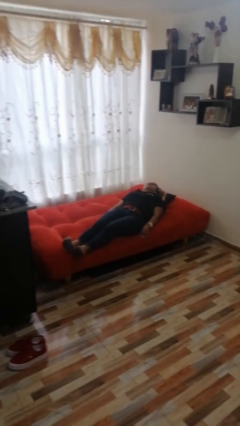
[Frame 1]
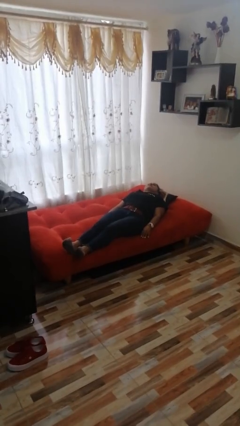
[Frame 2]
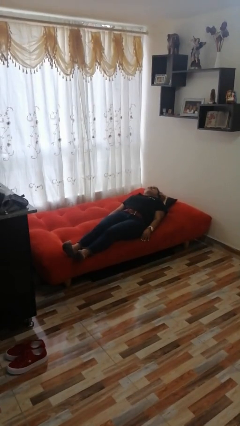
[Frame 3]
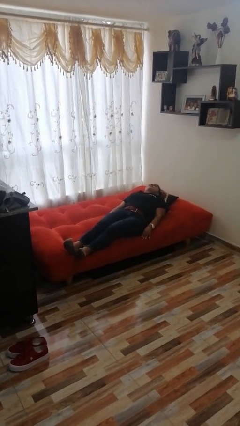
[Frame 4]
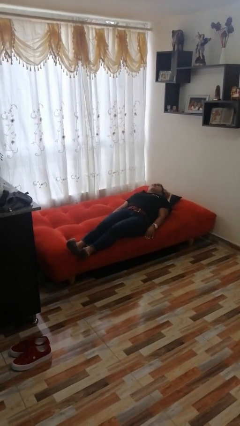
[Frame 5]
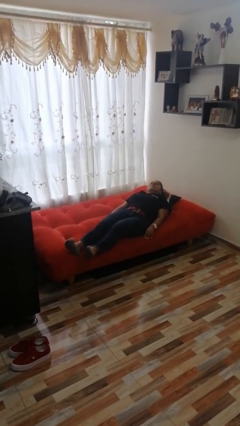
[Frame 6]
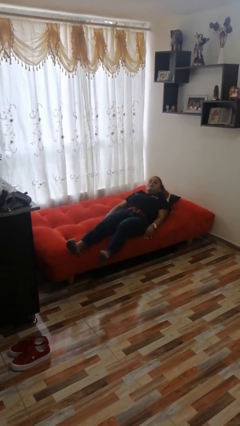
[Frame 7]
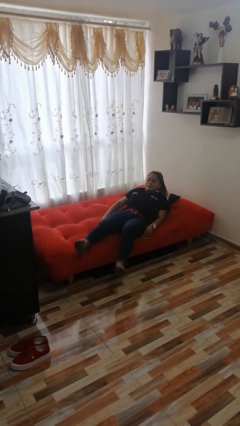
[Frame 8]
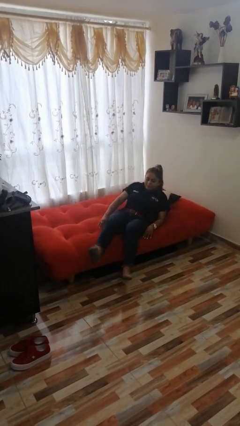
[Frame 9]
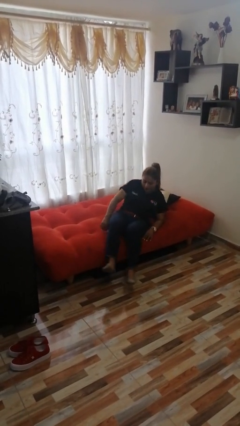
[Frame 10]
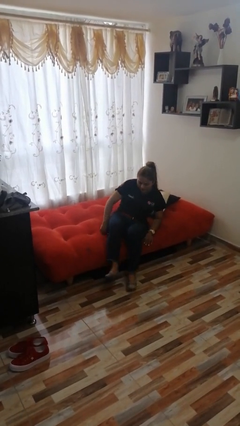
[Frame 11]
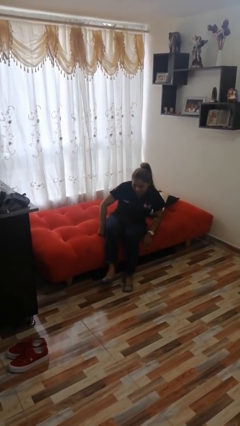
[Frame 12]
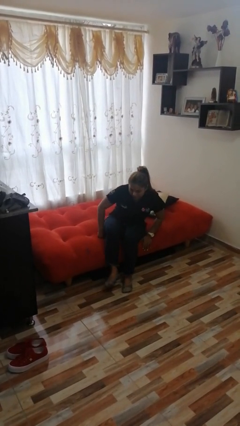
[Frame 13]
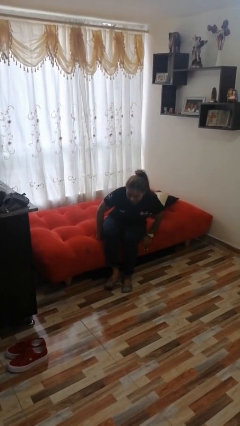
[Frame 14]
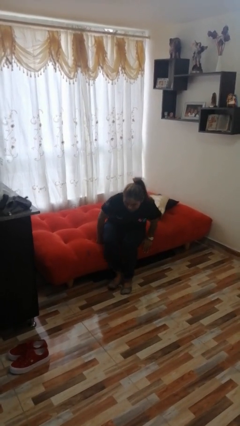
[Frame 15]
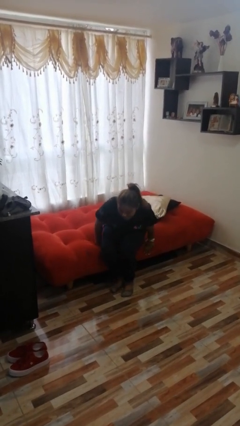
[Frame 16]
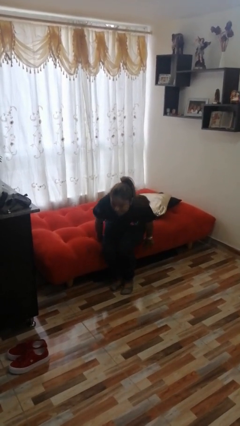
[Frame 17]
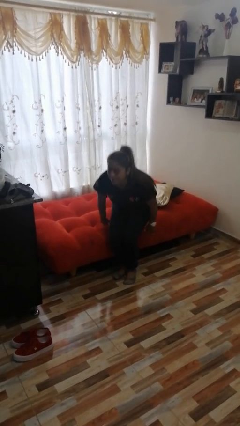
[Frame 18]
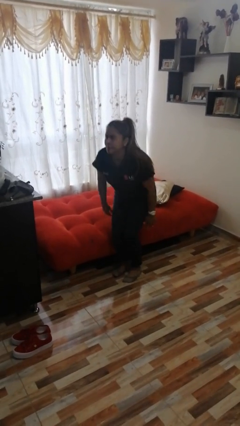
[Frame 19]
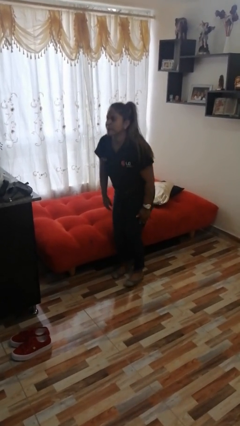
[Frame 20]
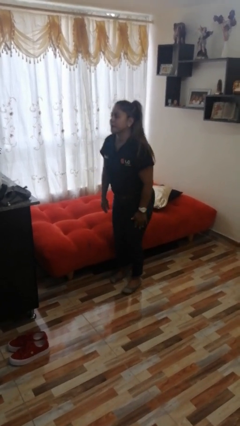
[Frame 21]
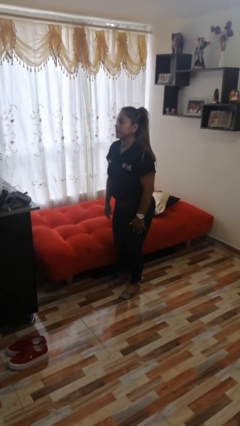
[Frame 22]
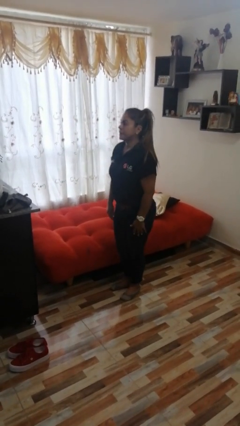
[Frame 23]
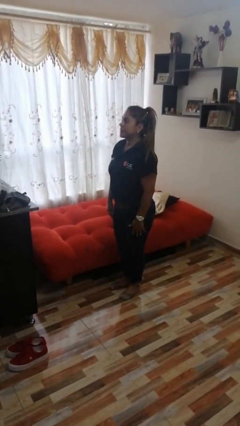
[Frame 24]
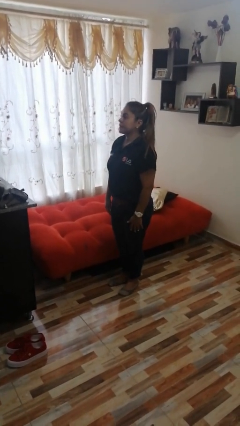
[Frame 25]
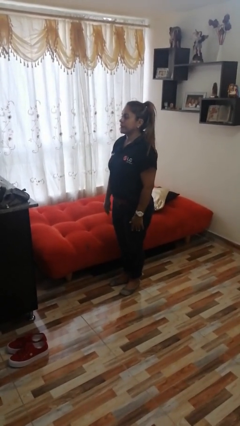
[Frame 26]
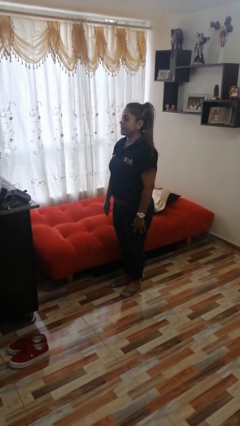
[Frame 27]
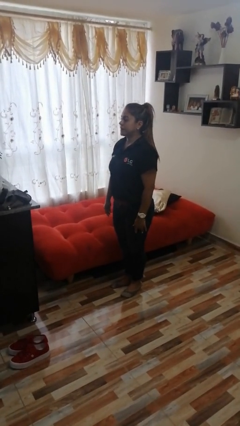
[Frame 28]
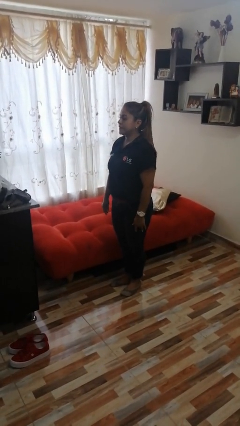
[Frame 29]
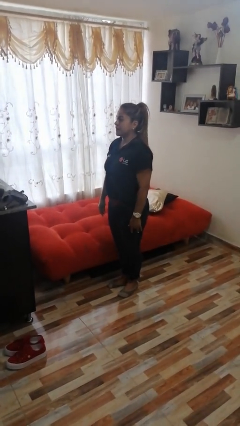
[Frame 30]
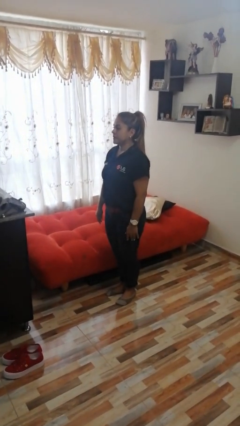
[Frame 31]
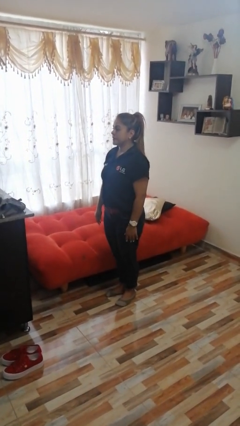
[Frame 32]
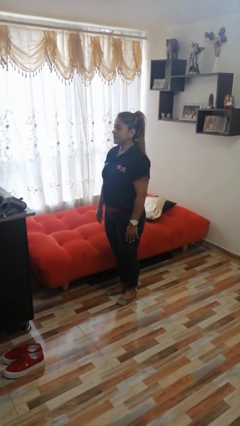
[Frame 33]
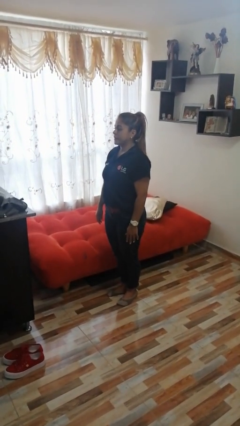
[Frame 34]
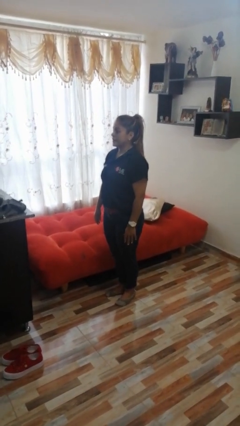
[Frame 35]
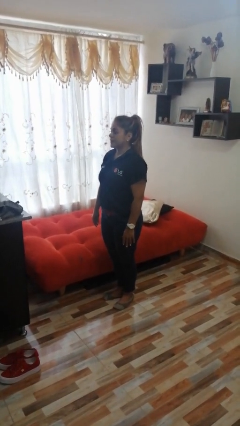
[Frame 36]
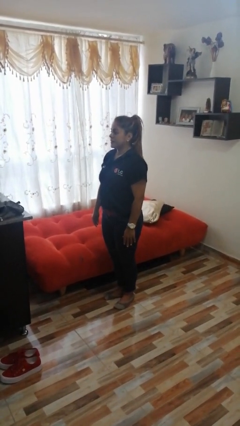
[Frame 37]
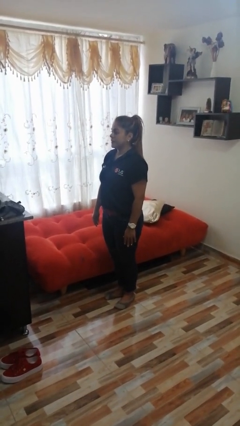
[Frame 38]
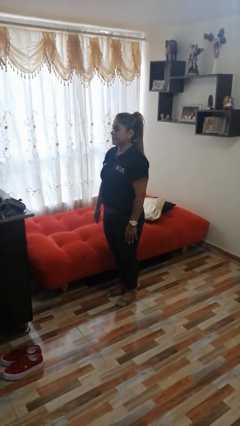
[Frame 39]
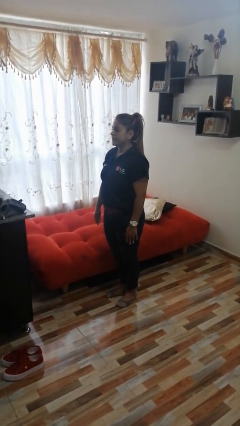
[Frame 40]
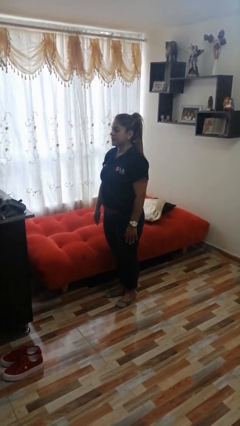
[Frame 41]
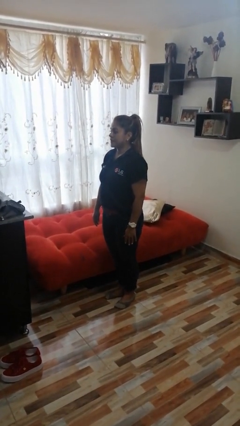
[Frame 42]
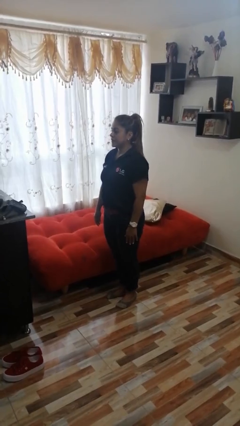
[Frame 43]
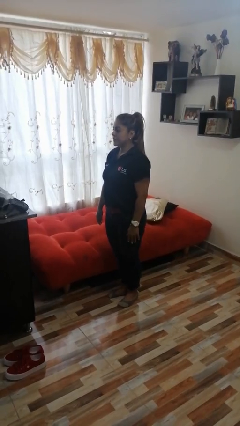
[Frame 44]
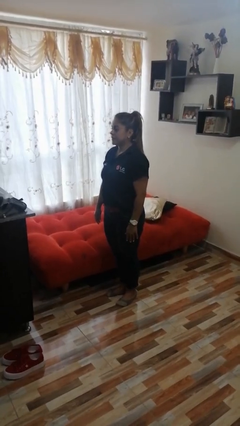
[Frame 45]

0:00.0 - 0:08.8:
person stands up

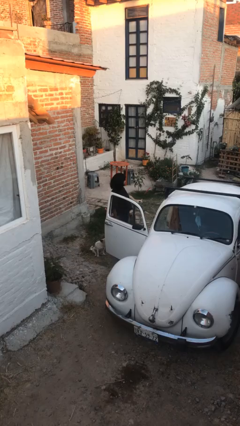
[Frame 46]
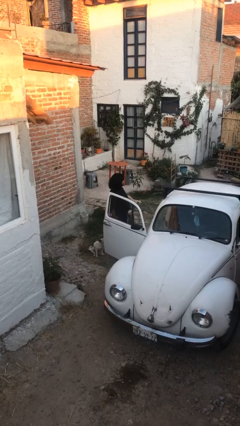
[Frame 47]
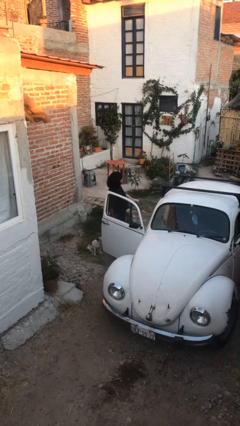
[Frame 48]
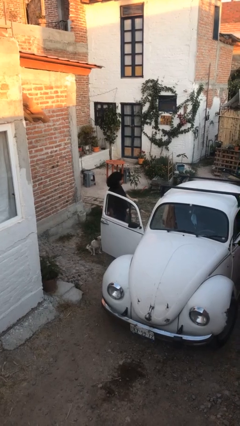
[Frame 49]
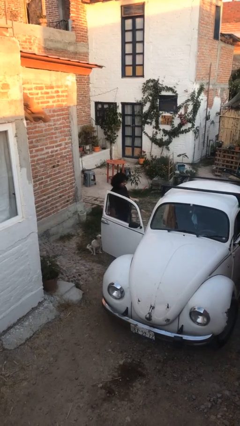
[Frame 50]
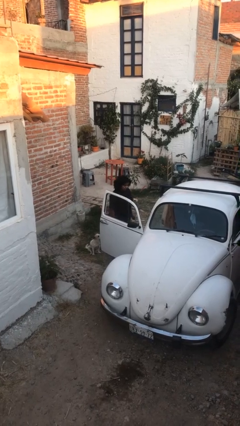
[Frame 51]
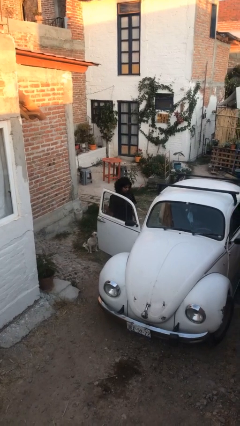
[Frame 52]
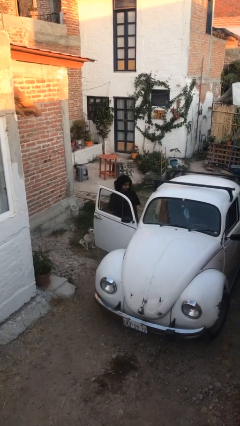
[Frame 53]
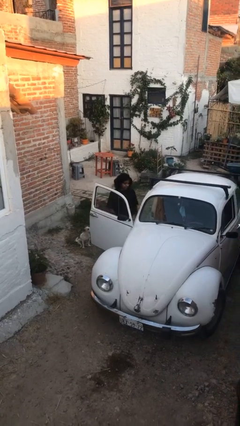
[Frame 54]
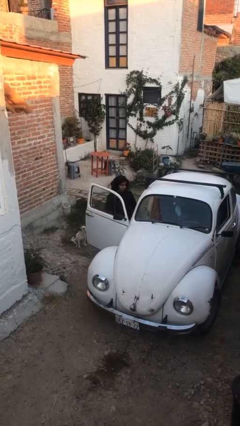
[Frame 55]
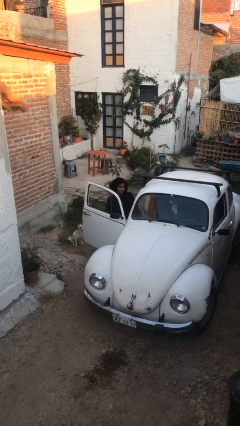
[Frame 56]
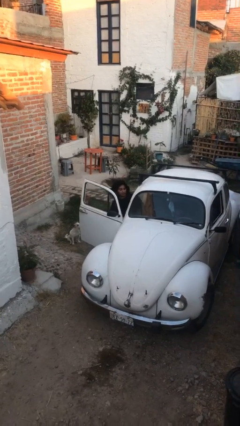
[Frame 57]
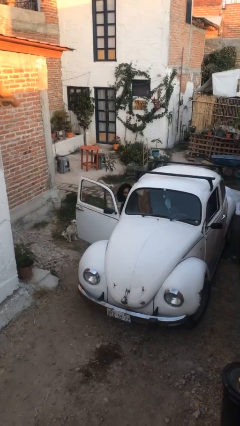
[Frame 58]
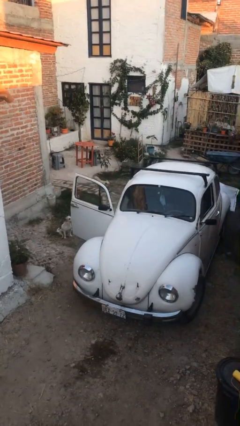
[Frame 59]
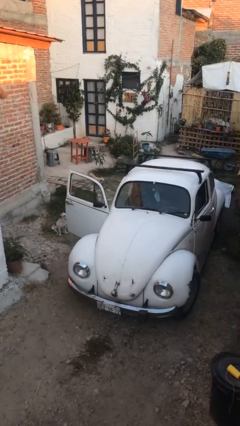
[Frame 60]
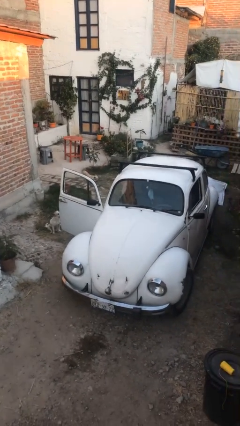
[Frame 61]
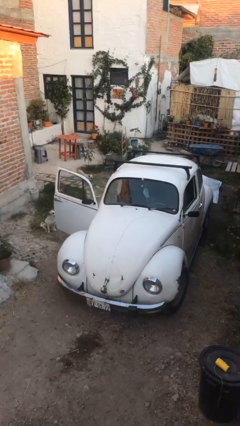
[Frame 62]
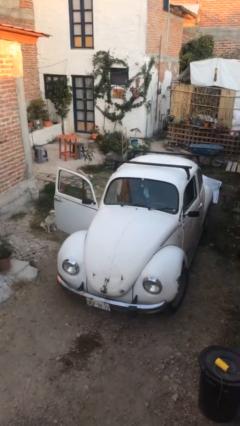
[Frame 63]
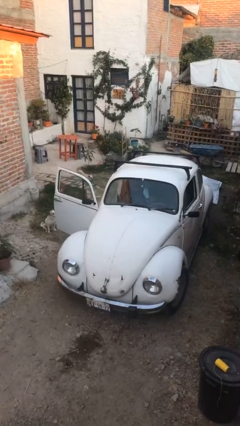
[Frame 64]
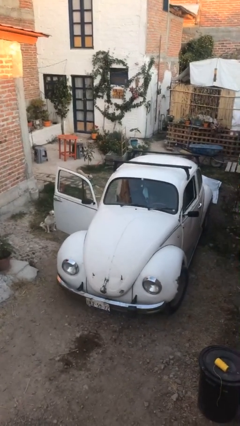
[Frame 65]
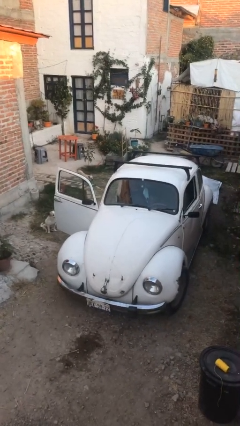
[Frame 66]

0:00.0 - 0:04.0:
person enters car

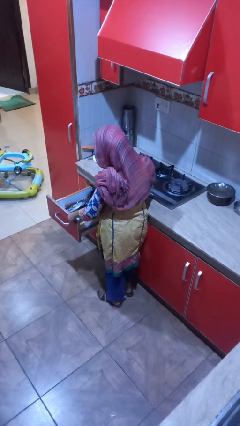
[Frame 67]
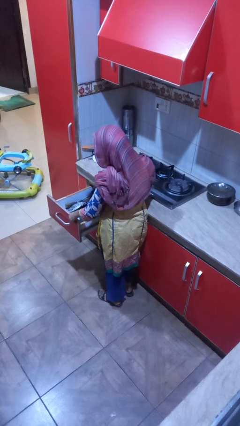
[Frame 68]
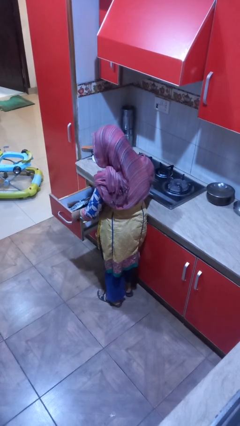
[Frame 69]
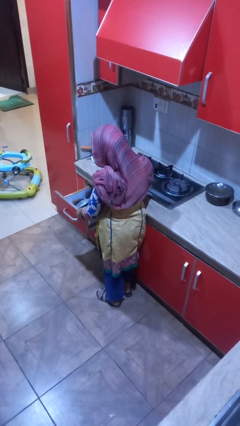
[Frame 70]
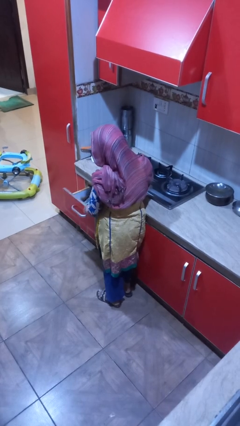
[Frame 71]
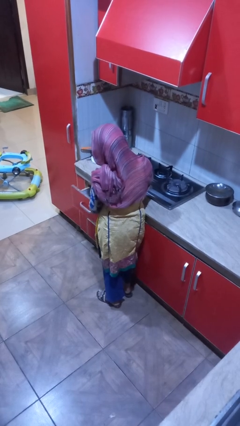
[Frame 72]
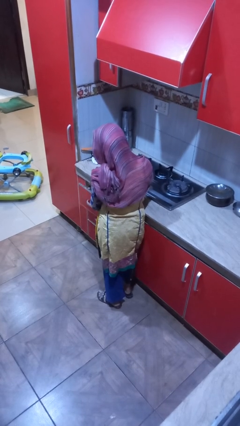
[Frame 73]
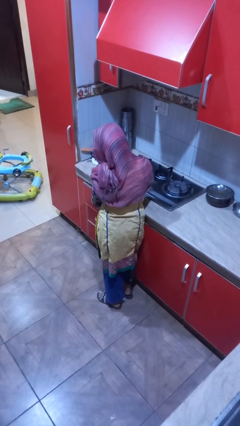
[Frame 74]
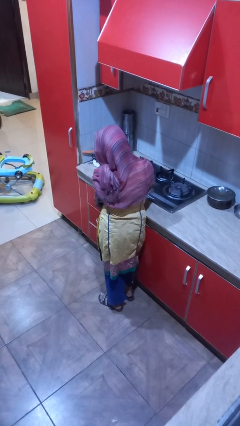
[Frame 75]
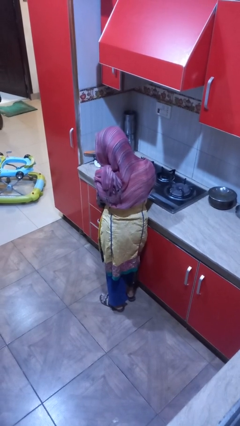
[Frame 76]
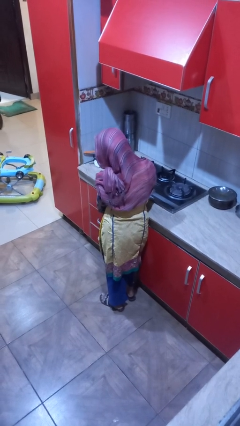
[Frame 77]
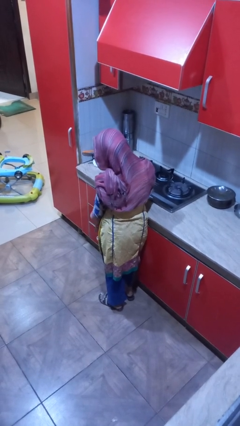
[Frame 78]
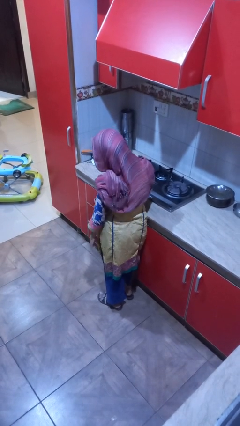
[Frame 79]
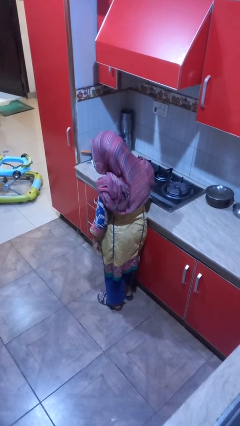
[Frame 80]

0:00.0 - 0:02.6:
person closes kitchen drawer

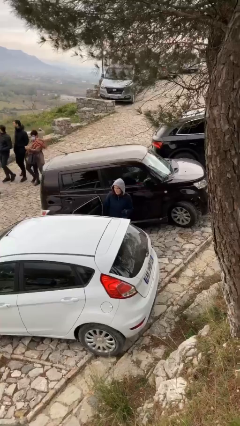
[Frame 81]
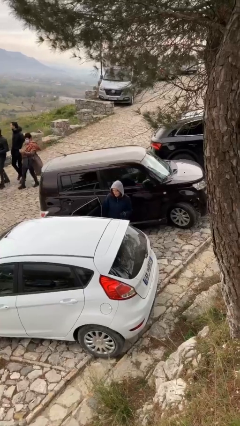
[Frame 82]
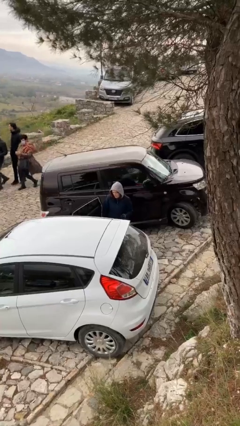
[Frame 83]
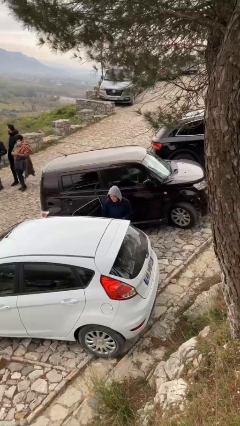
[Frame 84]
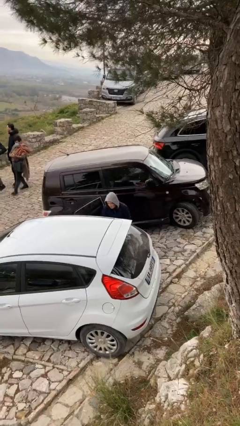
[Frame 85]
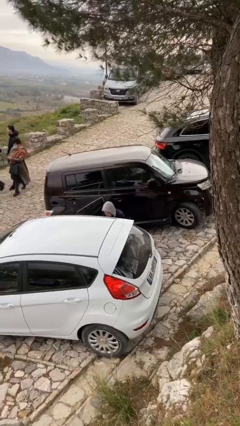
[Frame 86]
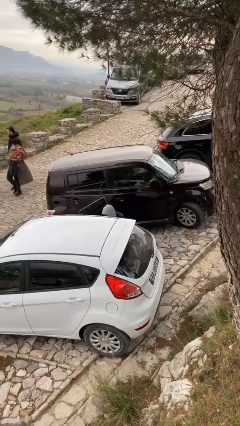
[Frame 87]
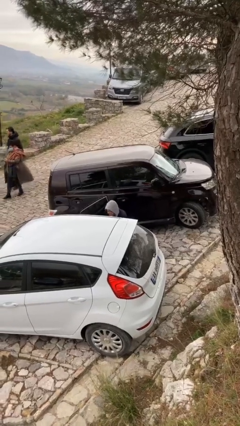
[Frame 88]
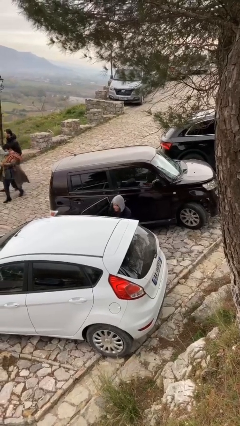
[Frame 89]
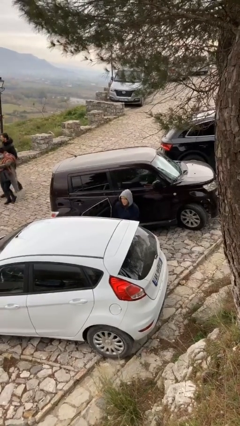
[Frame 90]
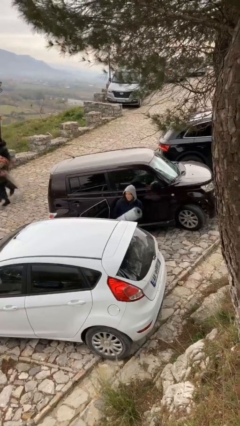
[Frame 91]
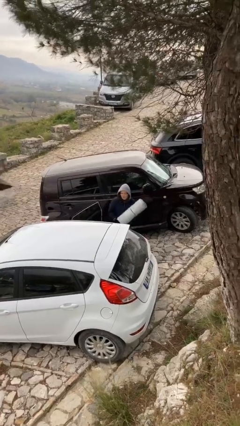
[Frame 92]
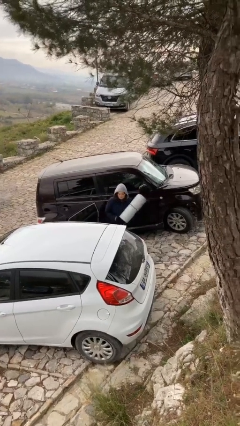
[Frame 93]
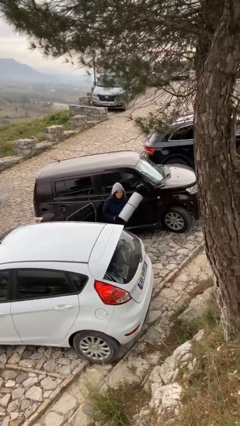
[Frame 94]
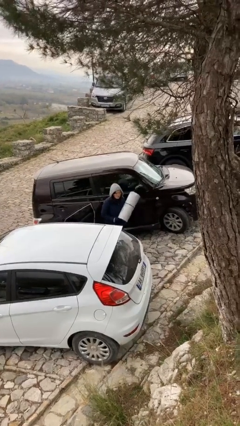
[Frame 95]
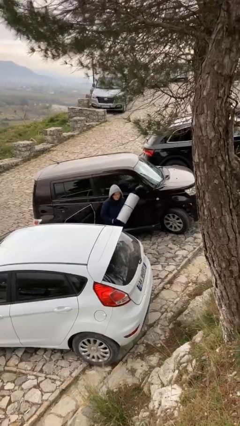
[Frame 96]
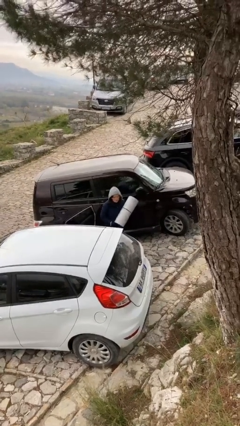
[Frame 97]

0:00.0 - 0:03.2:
person unloads car
